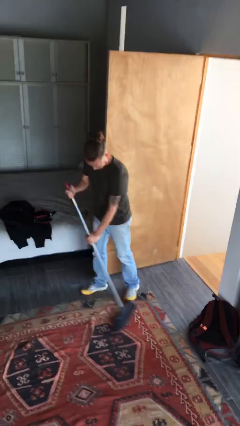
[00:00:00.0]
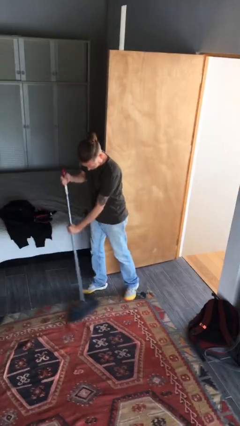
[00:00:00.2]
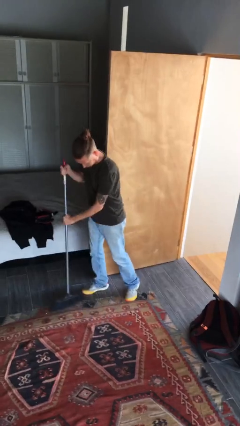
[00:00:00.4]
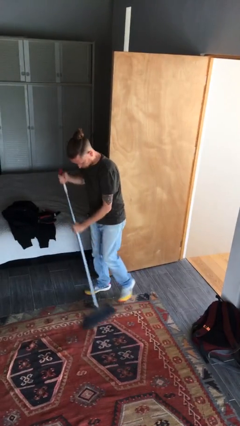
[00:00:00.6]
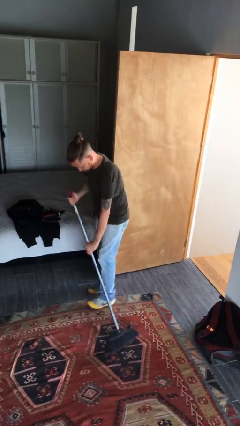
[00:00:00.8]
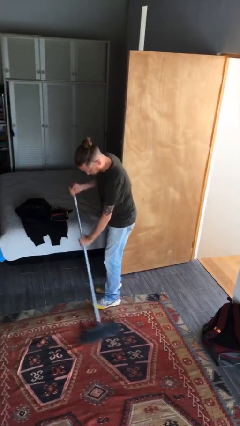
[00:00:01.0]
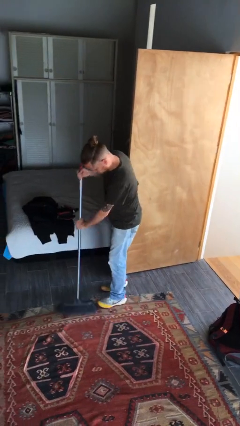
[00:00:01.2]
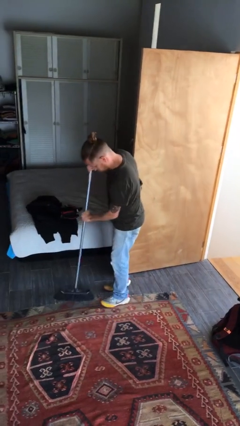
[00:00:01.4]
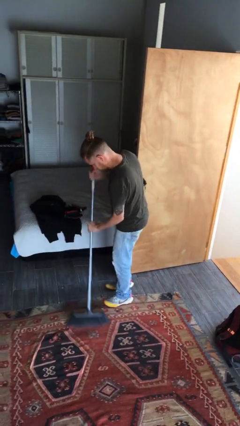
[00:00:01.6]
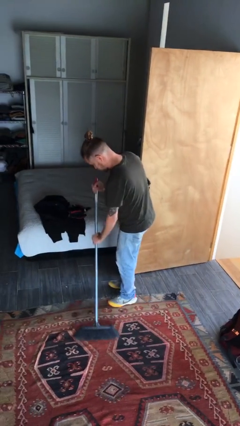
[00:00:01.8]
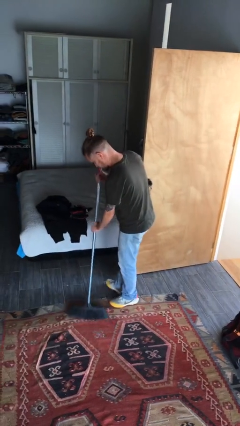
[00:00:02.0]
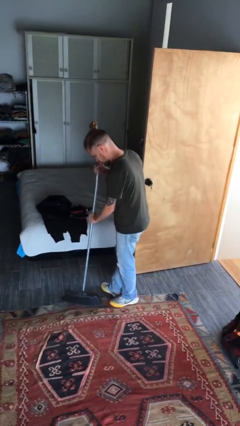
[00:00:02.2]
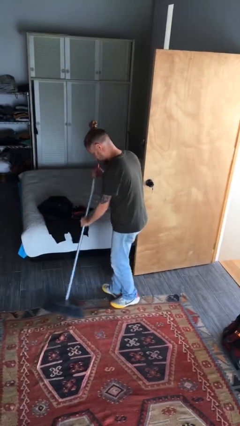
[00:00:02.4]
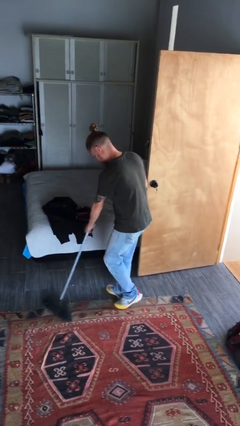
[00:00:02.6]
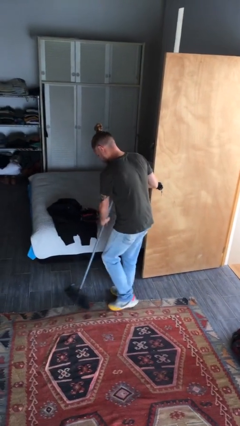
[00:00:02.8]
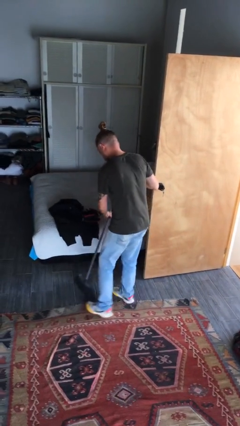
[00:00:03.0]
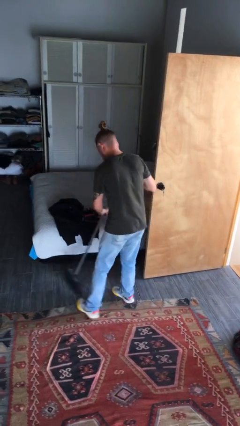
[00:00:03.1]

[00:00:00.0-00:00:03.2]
person sweeps floor

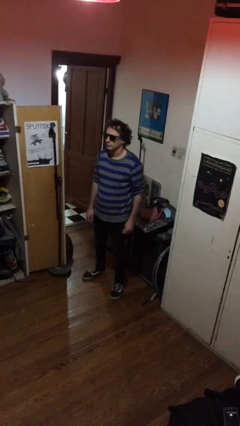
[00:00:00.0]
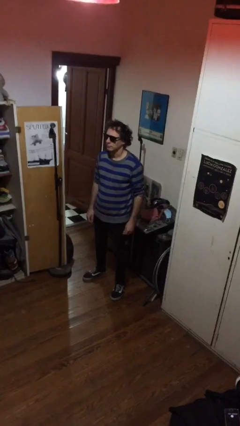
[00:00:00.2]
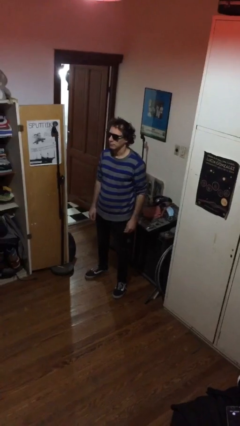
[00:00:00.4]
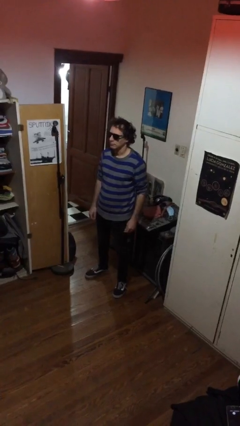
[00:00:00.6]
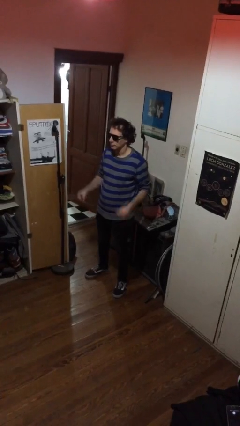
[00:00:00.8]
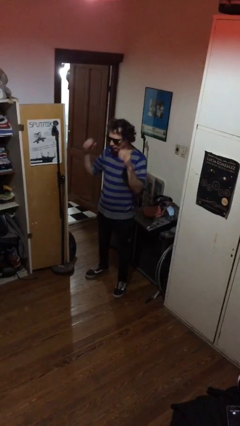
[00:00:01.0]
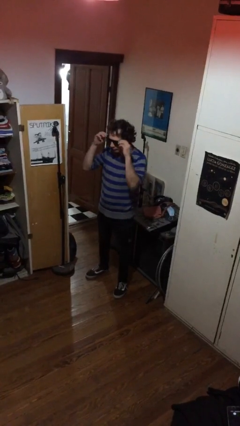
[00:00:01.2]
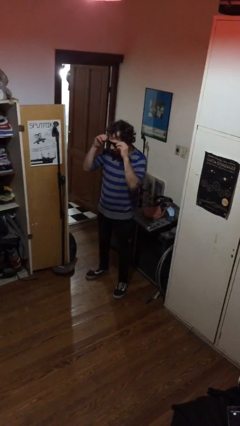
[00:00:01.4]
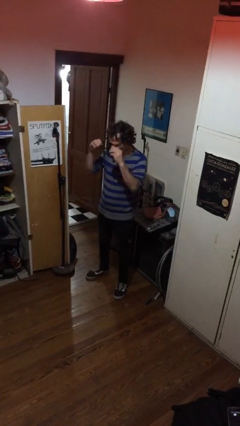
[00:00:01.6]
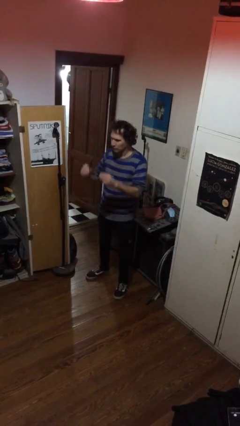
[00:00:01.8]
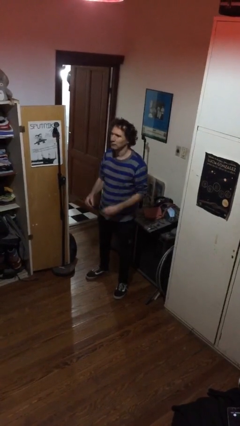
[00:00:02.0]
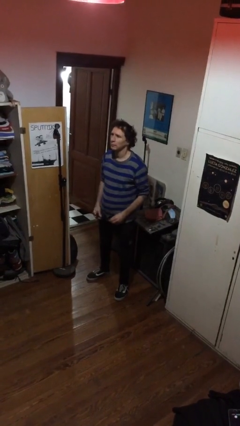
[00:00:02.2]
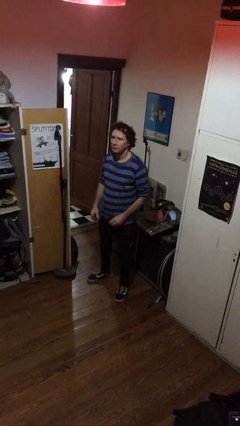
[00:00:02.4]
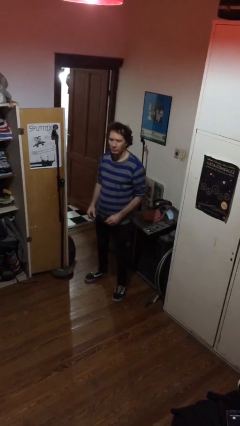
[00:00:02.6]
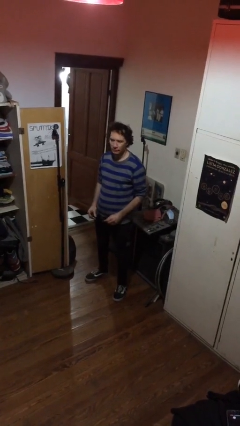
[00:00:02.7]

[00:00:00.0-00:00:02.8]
person takes off sunglasses

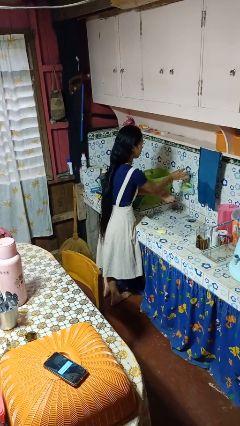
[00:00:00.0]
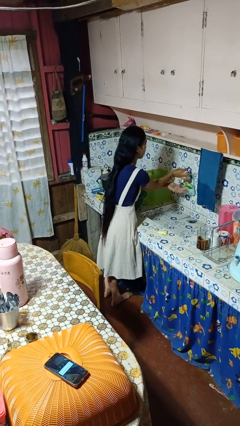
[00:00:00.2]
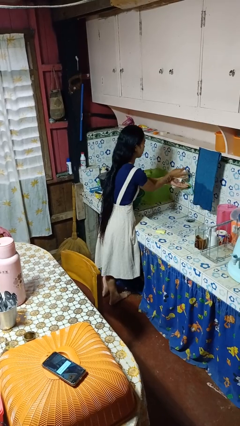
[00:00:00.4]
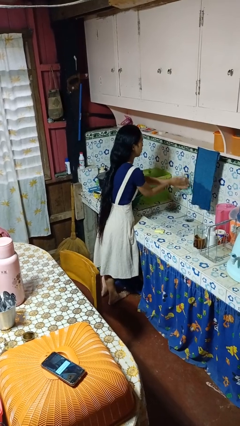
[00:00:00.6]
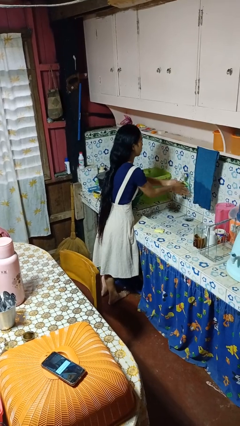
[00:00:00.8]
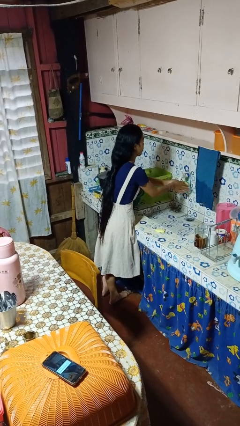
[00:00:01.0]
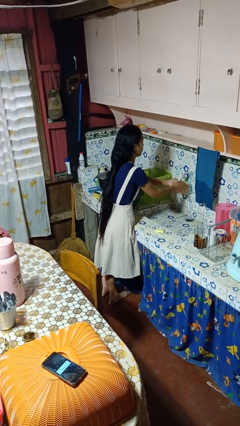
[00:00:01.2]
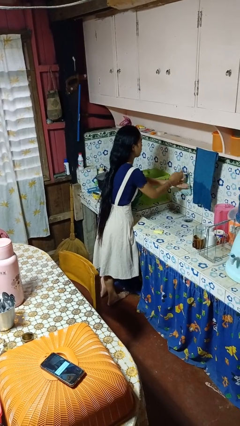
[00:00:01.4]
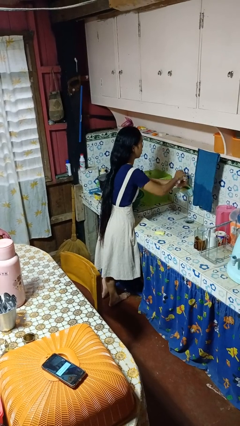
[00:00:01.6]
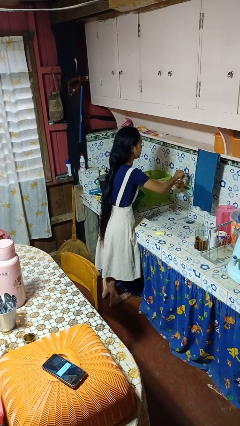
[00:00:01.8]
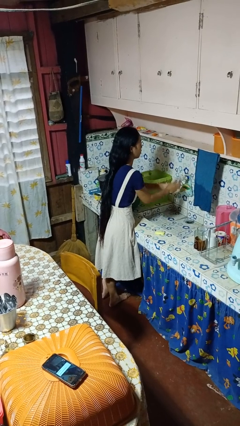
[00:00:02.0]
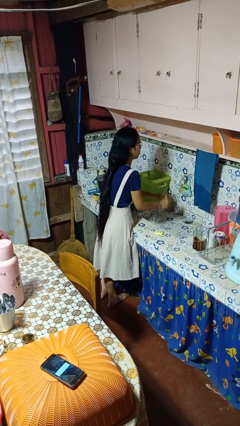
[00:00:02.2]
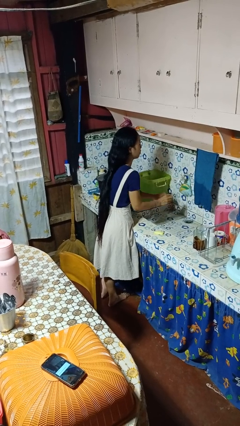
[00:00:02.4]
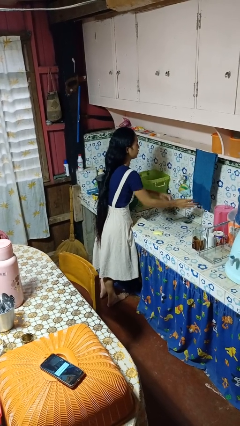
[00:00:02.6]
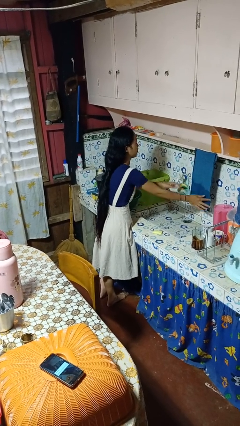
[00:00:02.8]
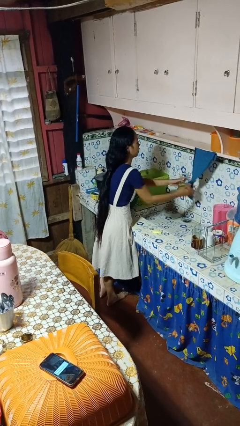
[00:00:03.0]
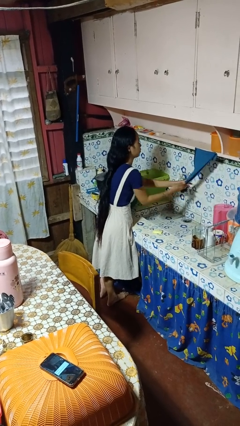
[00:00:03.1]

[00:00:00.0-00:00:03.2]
person washes hands

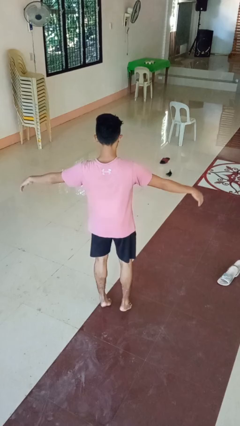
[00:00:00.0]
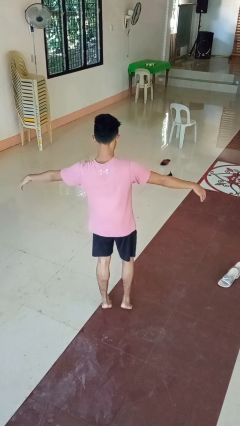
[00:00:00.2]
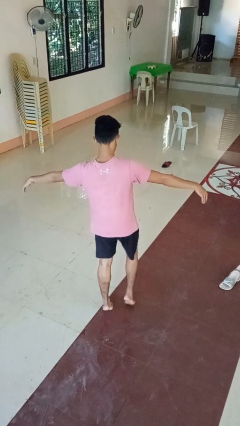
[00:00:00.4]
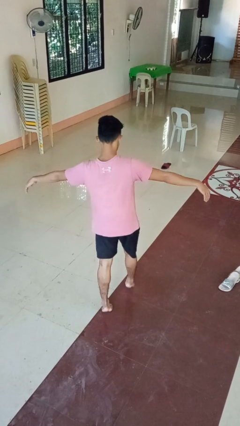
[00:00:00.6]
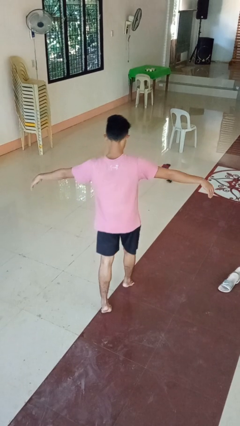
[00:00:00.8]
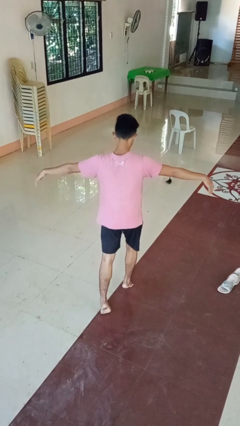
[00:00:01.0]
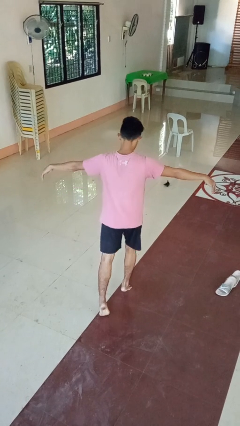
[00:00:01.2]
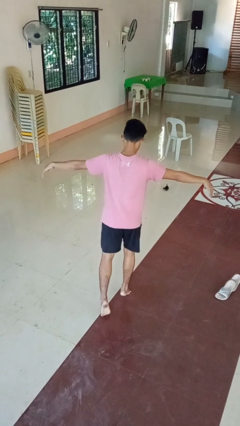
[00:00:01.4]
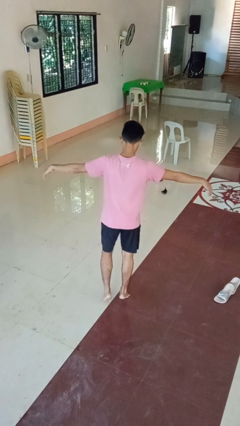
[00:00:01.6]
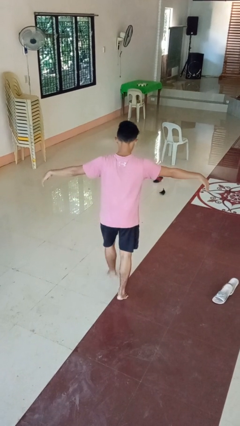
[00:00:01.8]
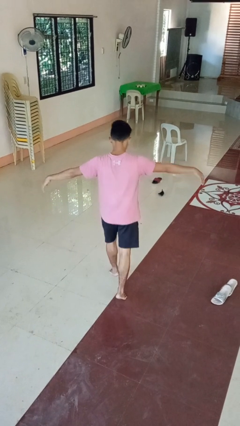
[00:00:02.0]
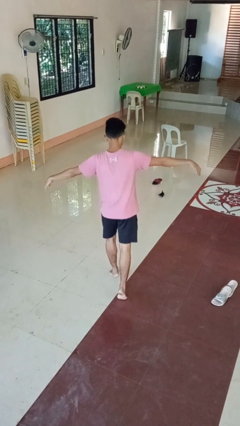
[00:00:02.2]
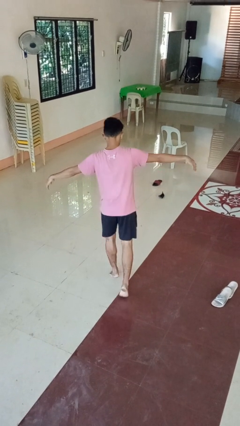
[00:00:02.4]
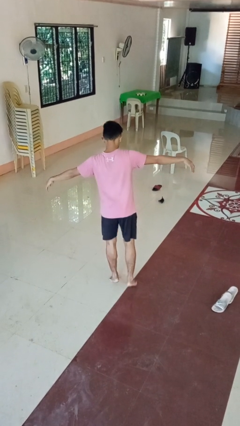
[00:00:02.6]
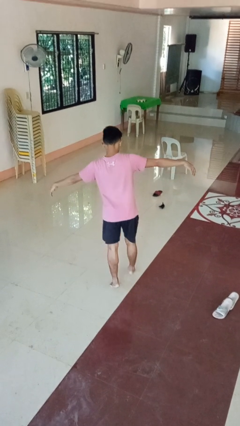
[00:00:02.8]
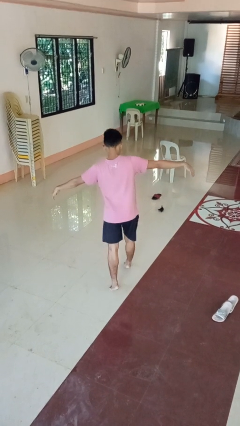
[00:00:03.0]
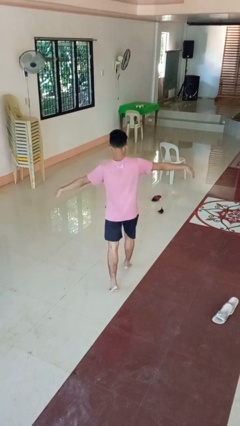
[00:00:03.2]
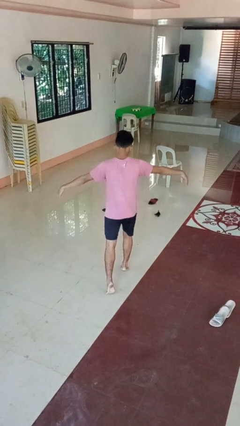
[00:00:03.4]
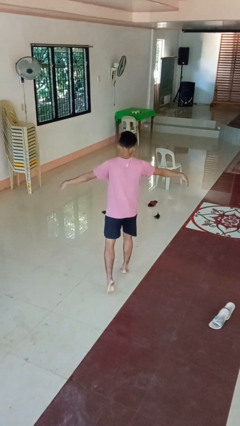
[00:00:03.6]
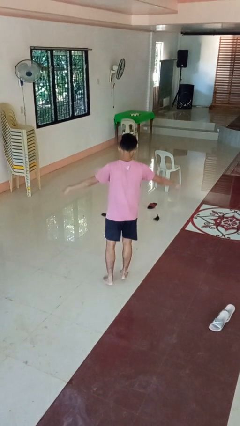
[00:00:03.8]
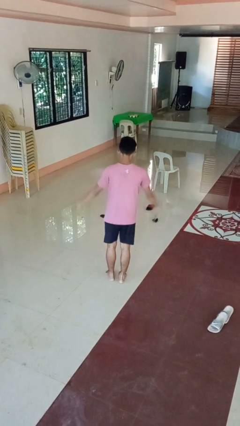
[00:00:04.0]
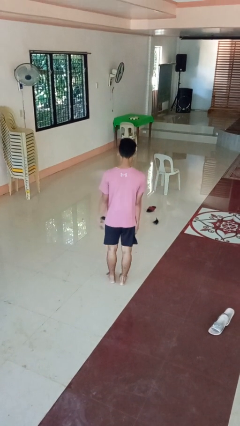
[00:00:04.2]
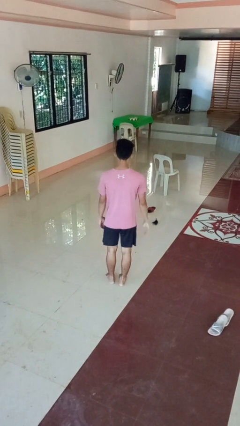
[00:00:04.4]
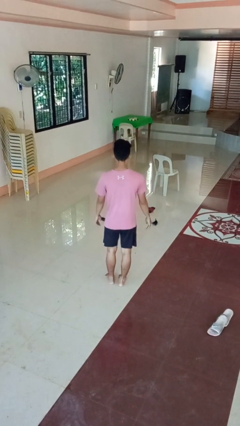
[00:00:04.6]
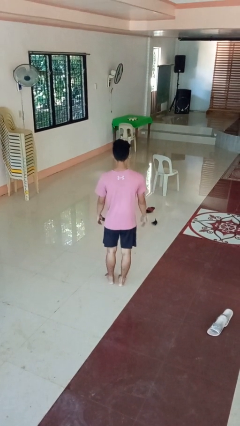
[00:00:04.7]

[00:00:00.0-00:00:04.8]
person walks tiptoe

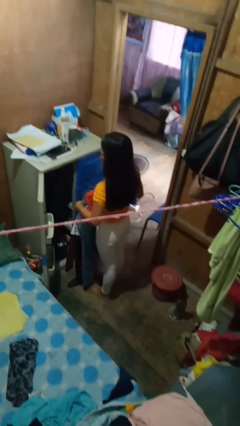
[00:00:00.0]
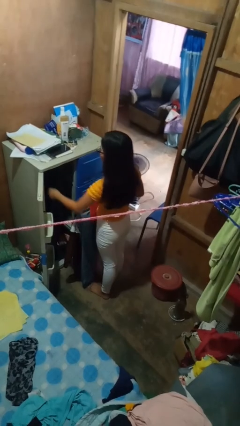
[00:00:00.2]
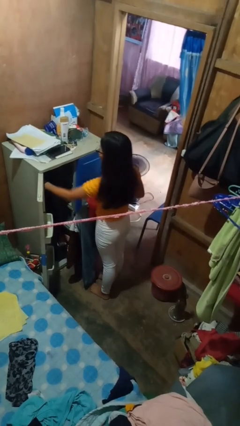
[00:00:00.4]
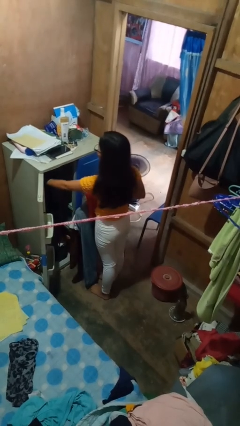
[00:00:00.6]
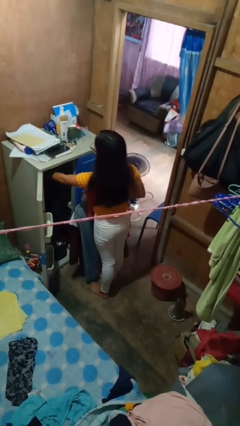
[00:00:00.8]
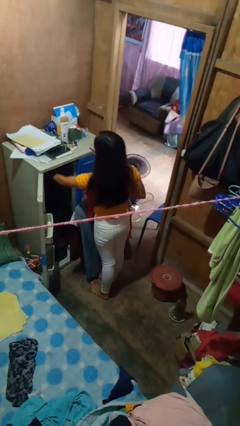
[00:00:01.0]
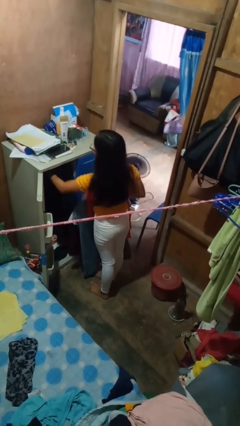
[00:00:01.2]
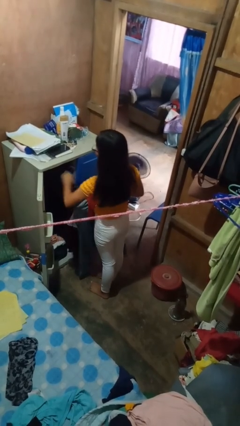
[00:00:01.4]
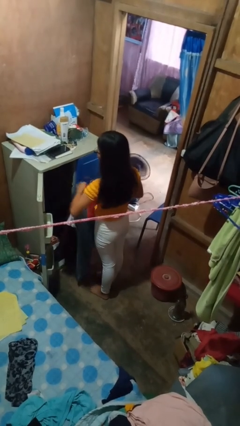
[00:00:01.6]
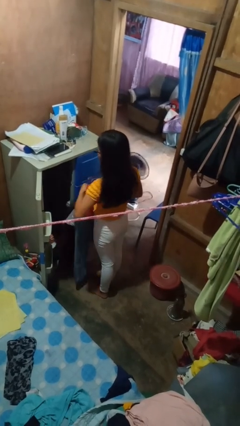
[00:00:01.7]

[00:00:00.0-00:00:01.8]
person takes clothes from closet

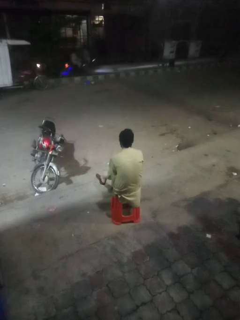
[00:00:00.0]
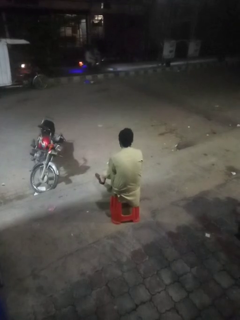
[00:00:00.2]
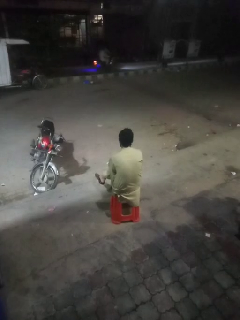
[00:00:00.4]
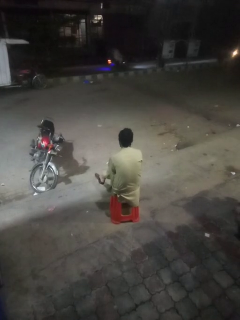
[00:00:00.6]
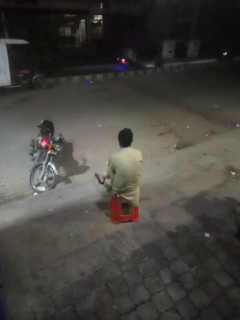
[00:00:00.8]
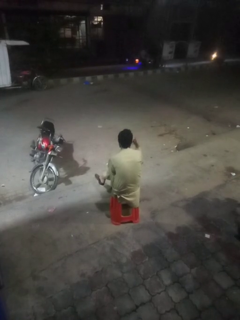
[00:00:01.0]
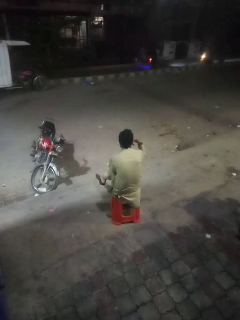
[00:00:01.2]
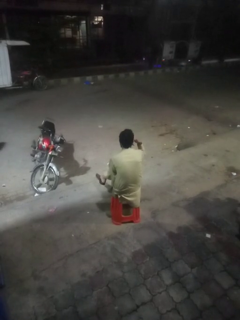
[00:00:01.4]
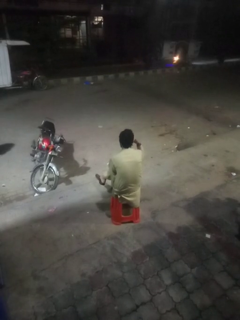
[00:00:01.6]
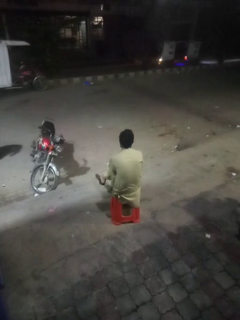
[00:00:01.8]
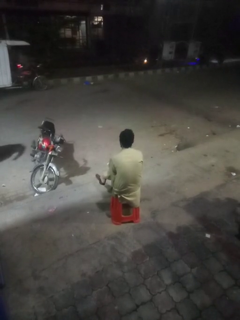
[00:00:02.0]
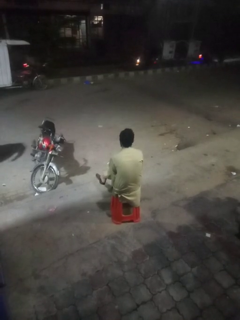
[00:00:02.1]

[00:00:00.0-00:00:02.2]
person gestures call me
